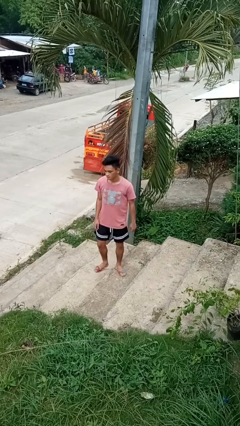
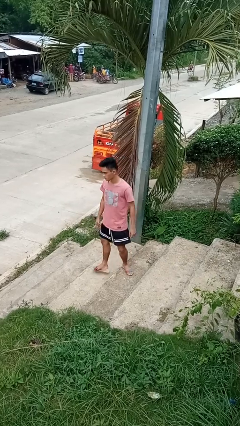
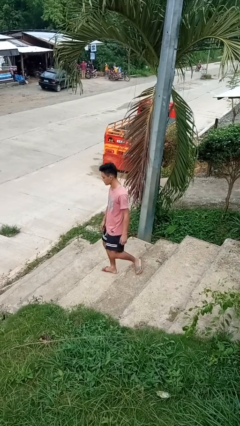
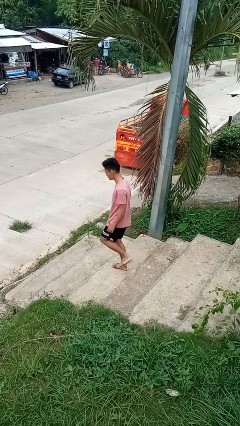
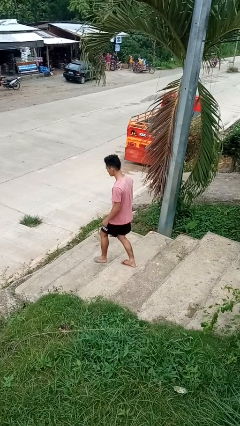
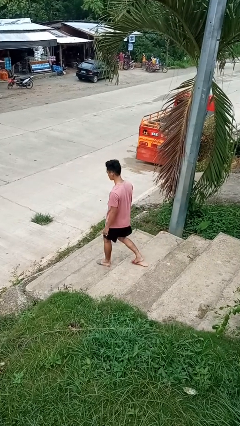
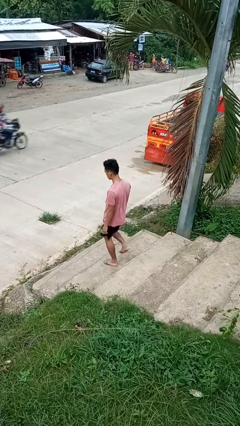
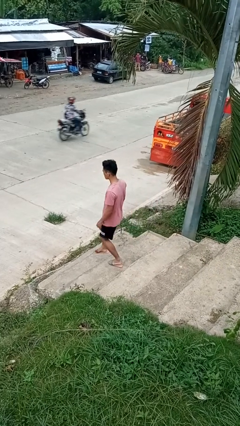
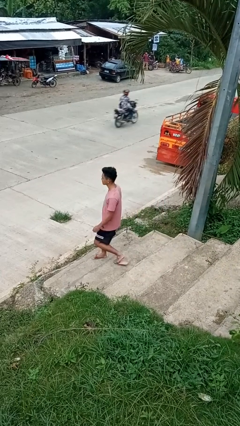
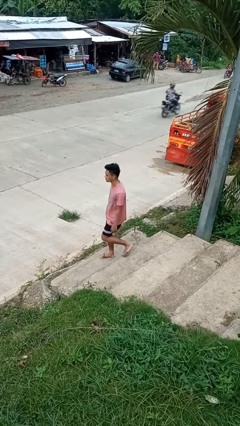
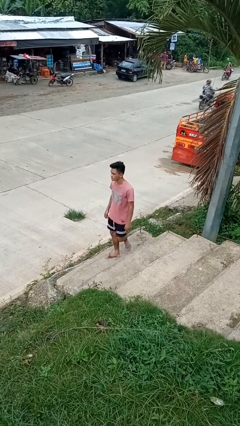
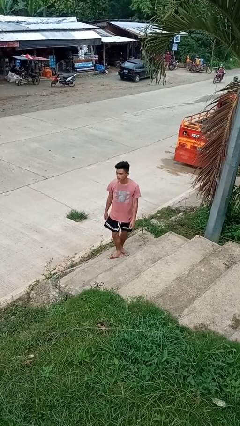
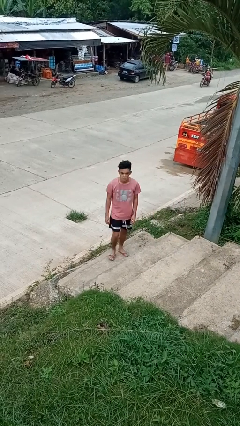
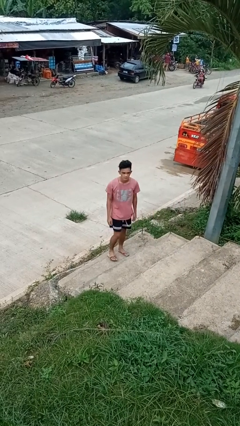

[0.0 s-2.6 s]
person climbs down stairs

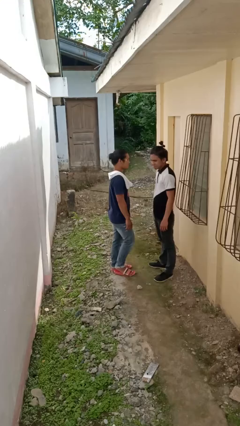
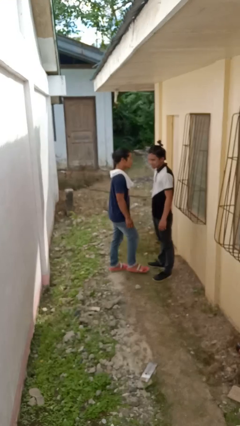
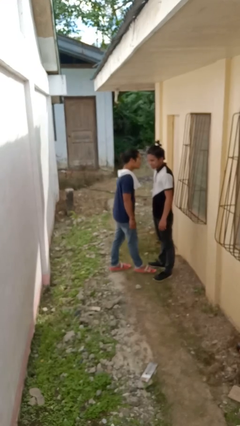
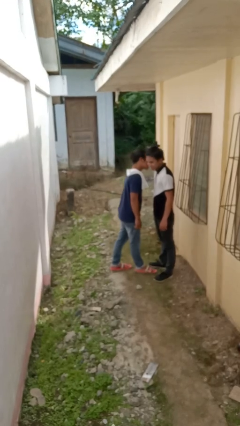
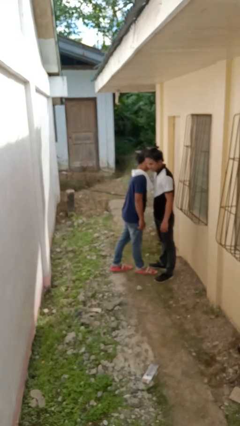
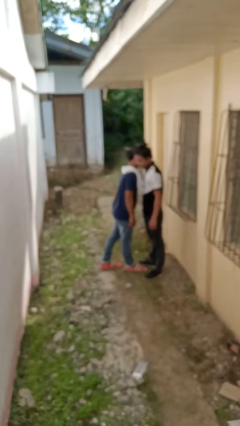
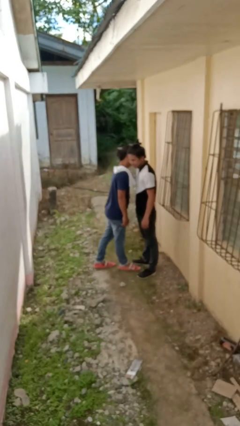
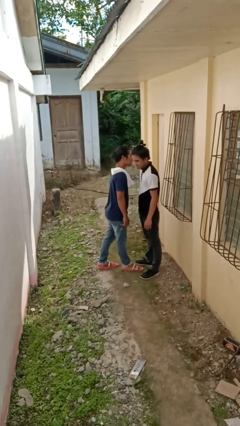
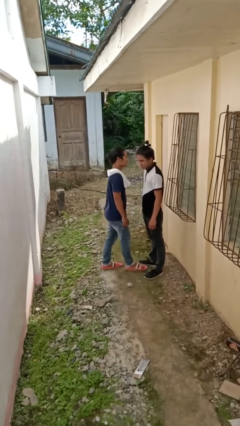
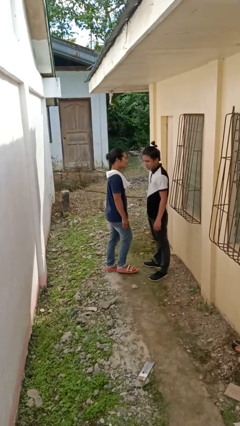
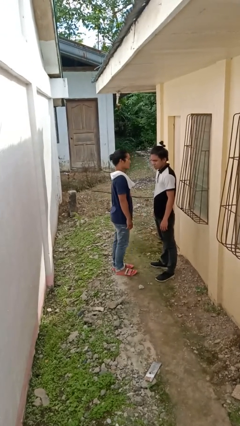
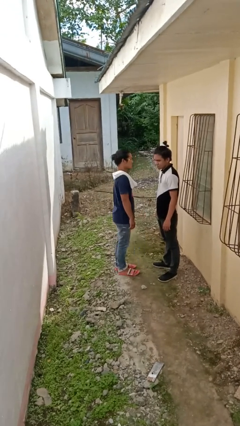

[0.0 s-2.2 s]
person kisses cheek of person

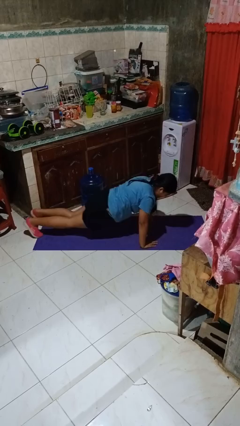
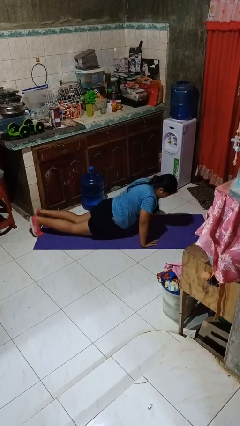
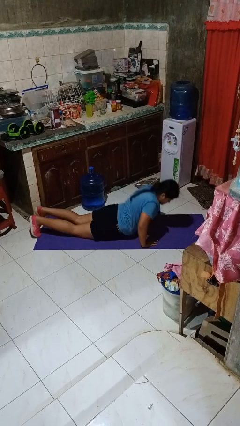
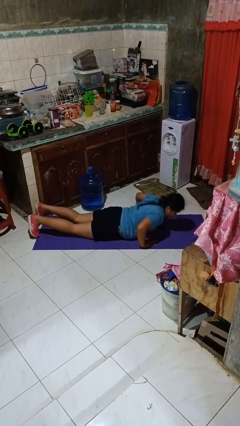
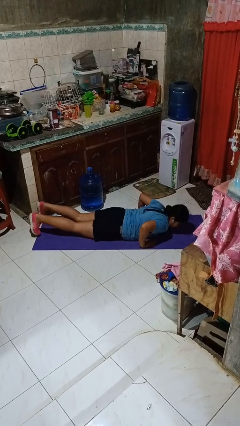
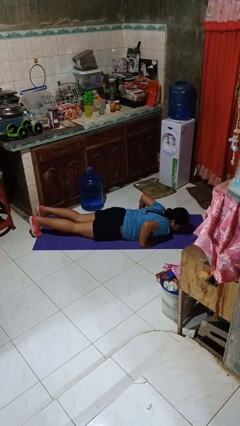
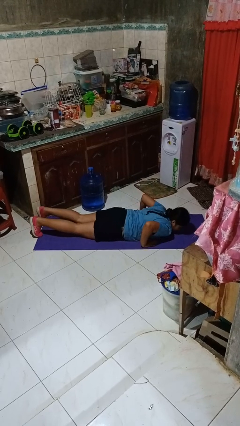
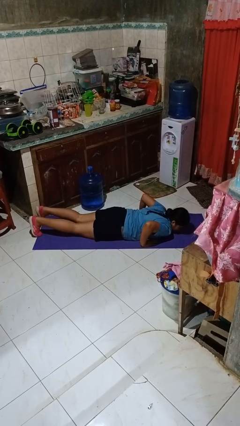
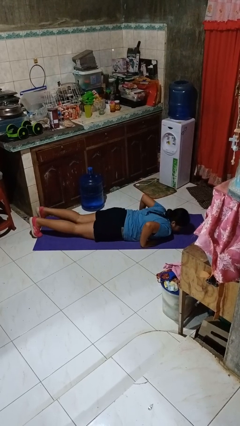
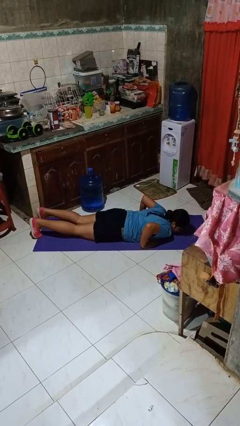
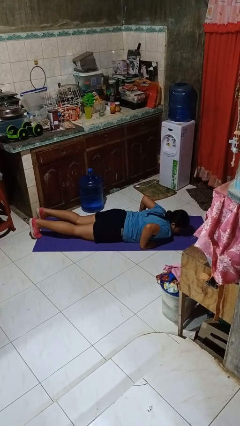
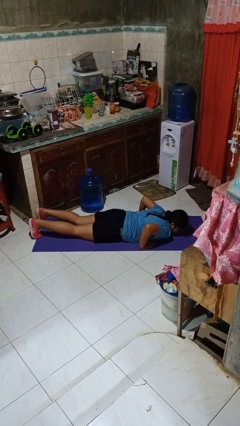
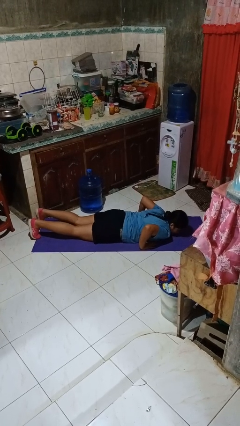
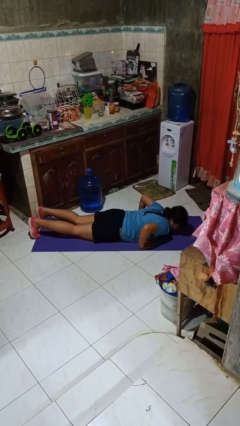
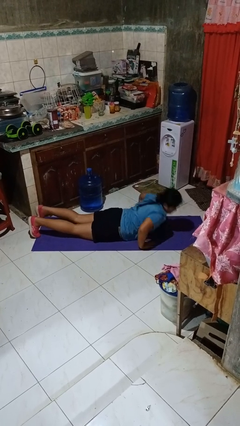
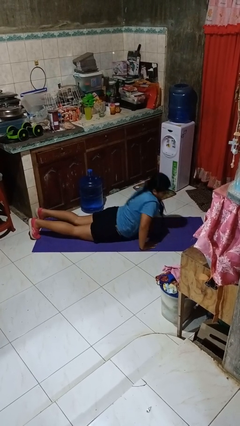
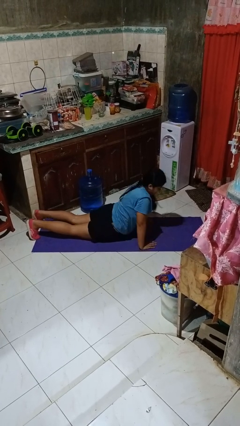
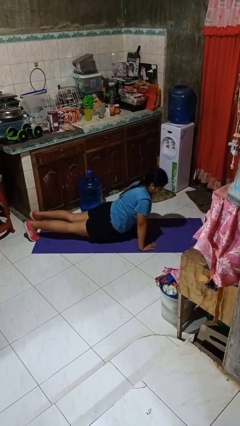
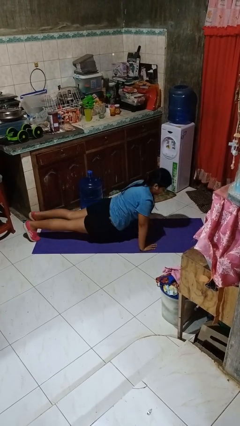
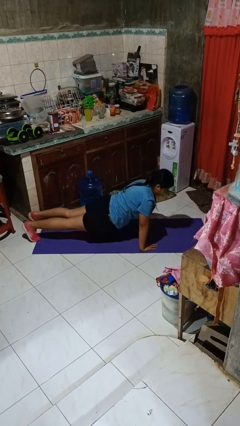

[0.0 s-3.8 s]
person exercises with pushup

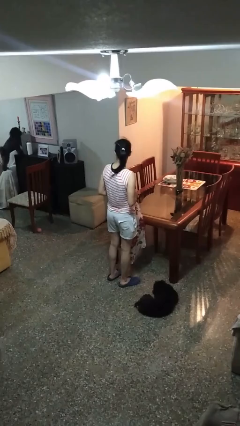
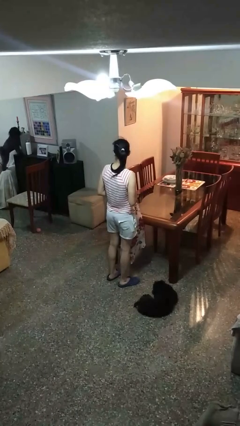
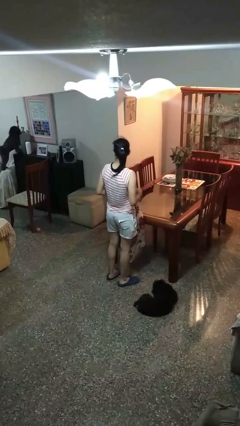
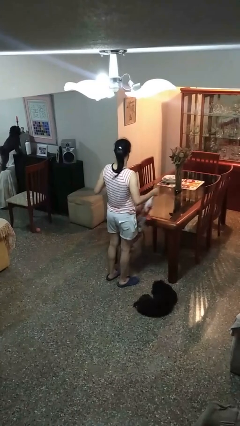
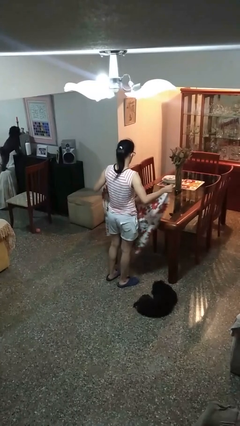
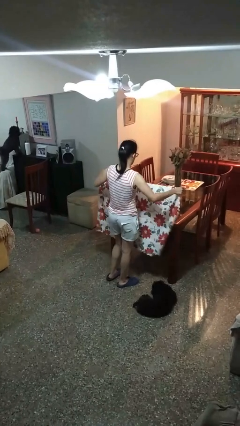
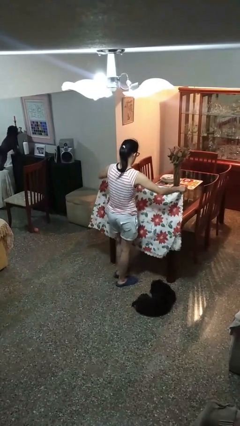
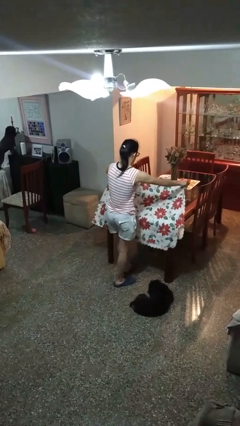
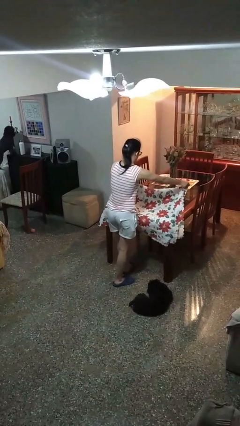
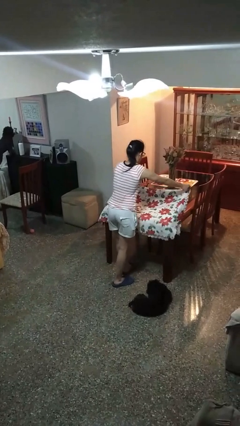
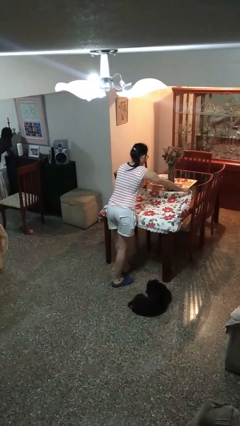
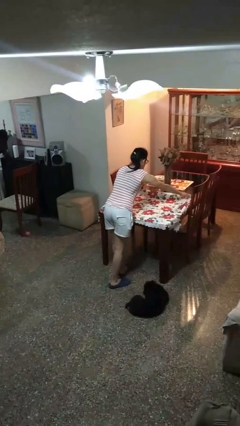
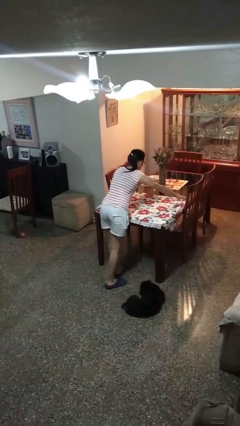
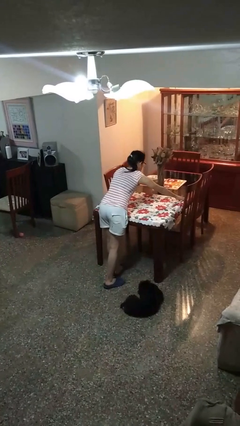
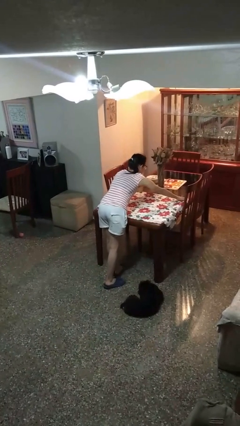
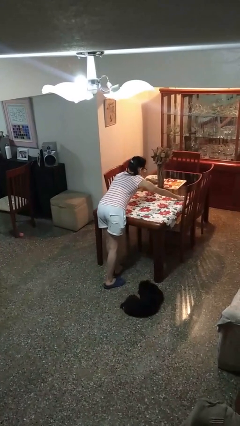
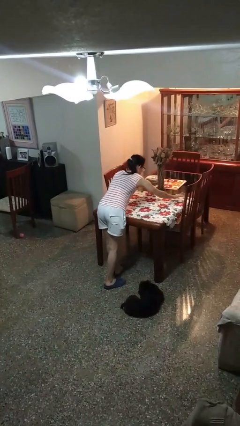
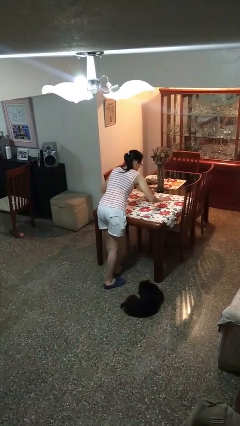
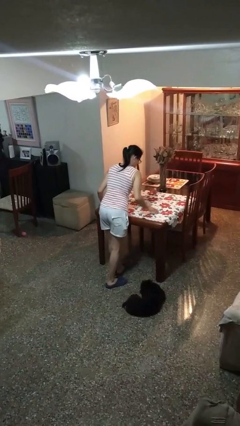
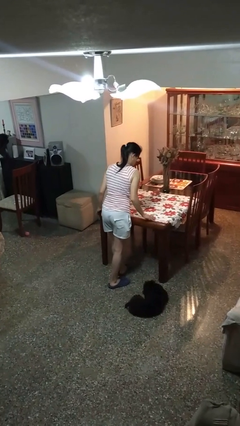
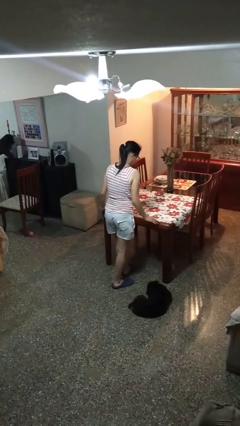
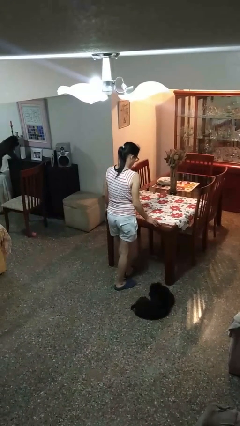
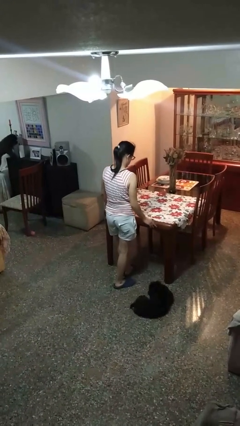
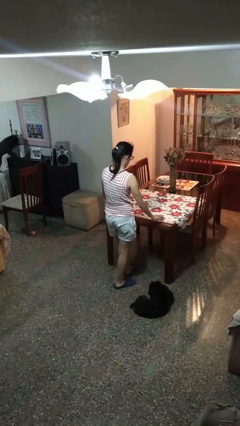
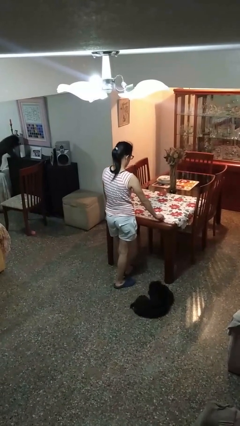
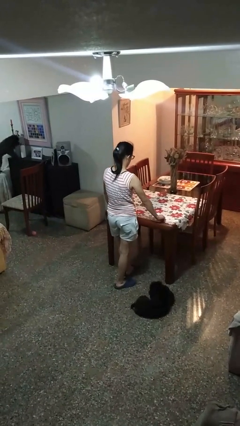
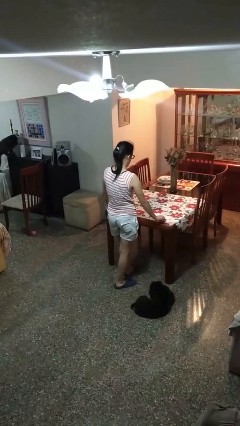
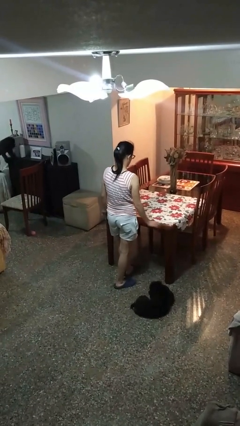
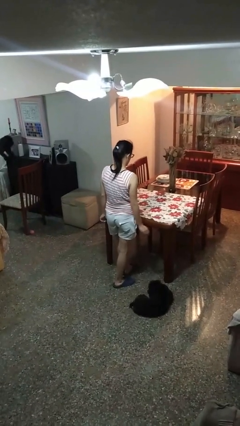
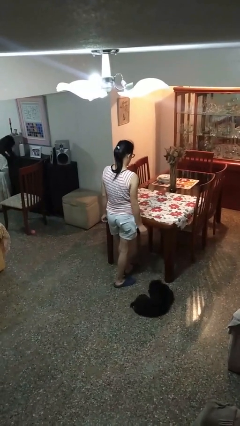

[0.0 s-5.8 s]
person spreads tablecloth

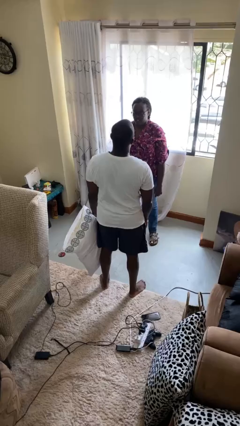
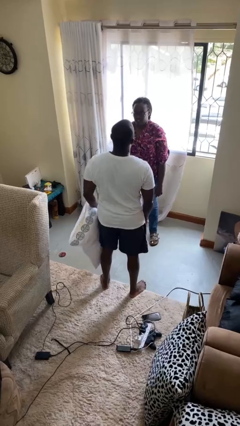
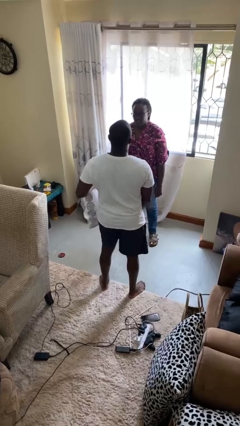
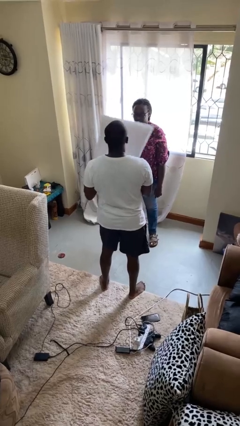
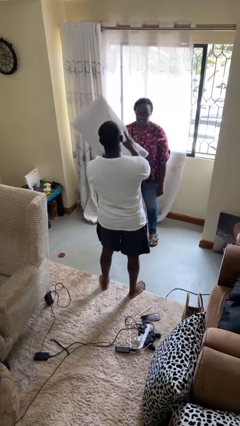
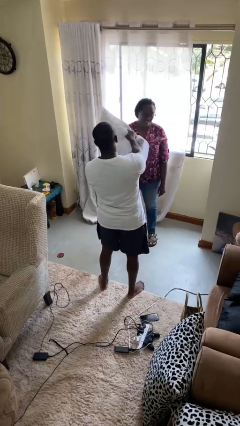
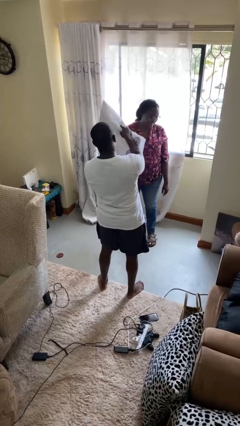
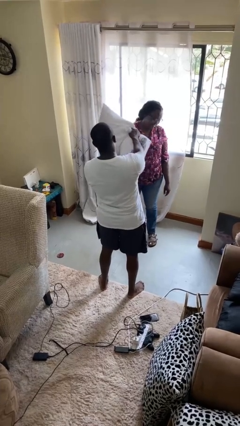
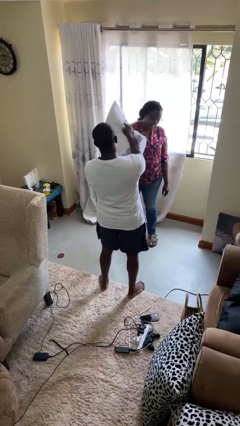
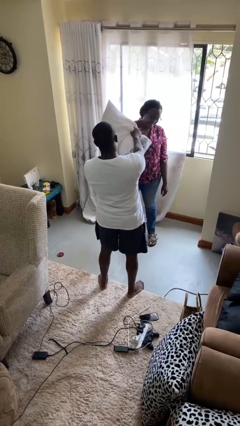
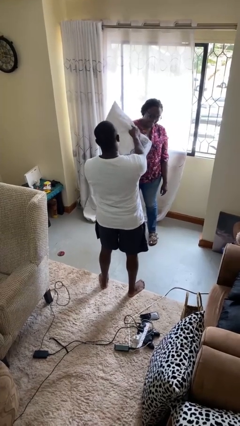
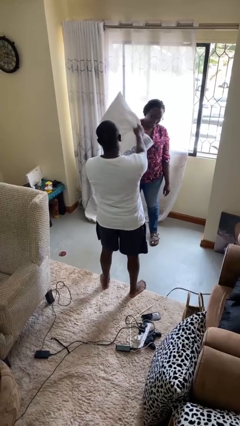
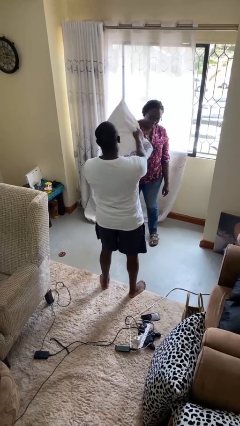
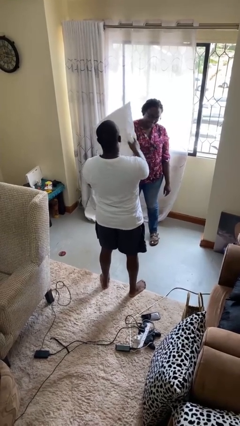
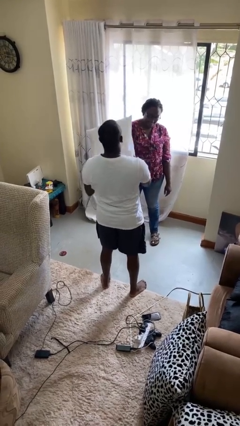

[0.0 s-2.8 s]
person hits person with pillow

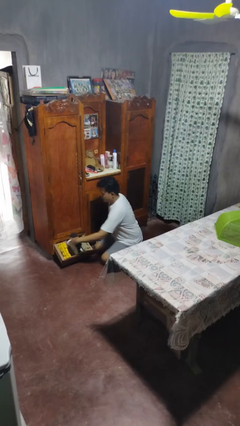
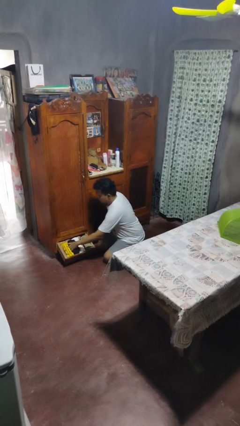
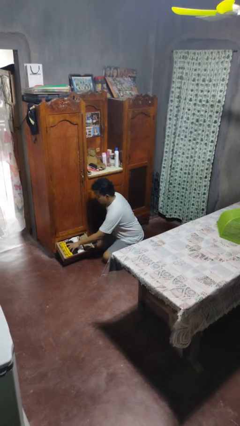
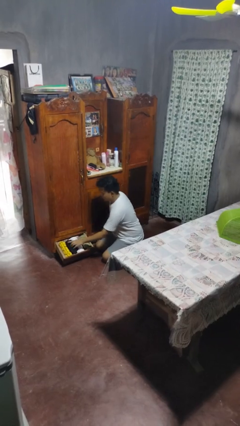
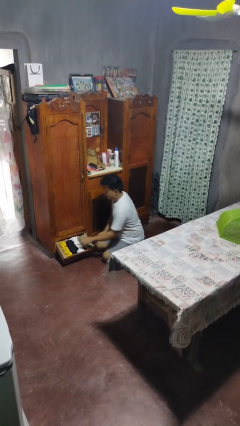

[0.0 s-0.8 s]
person puts clothes into dresser
